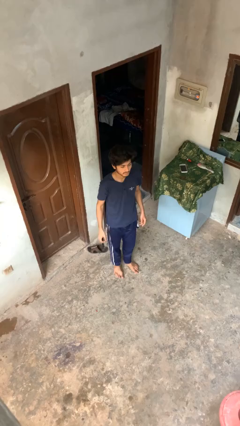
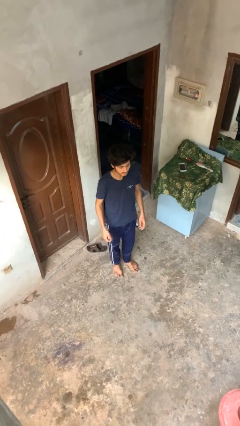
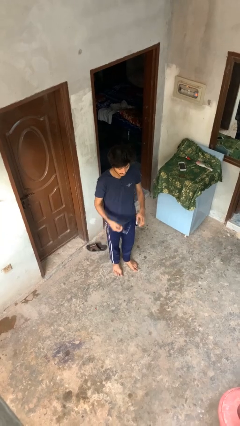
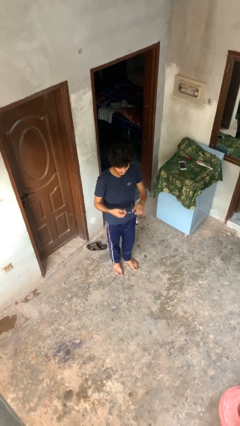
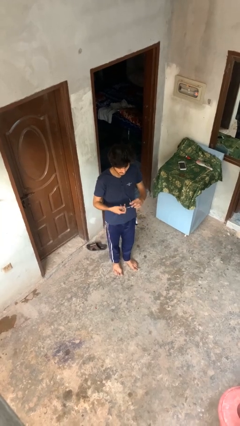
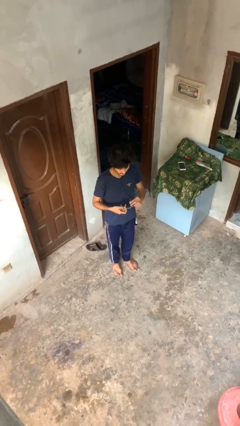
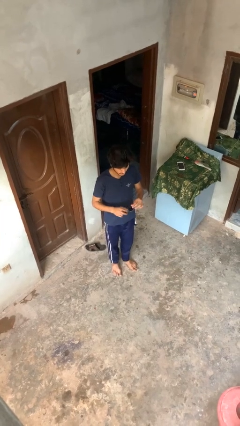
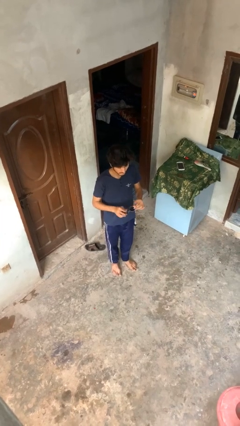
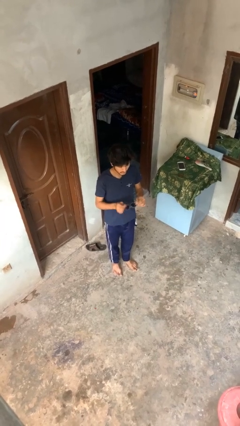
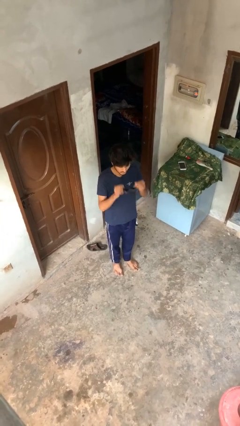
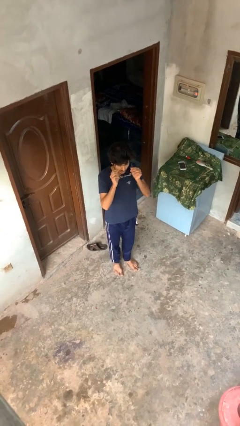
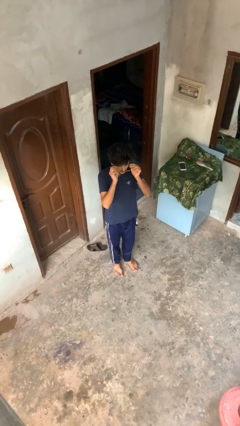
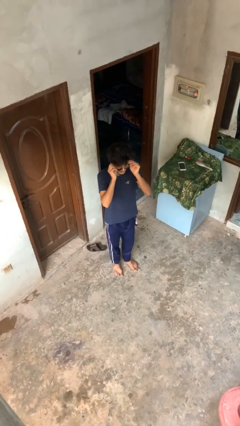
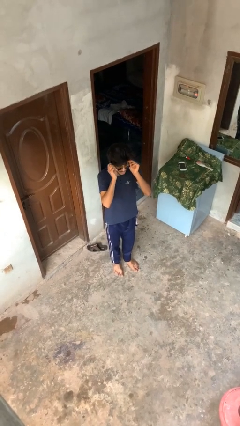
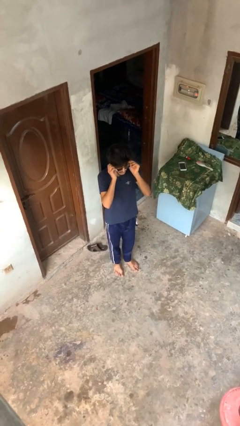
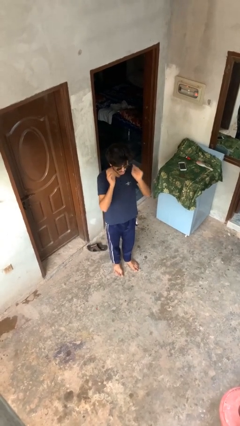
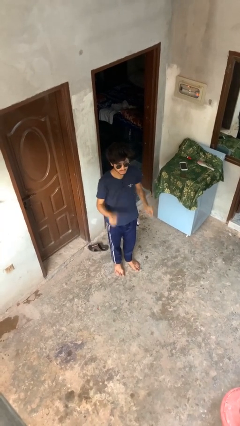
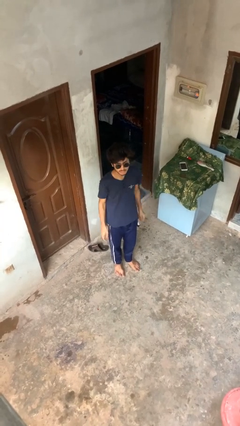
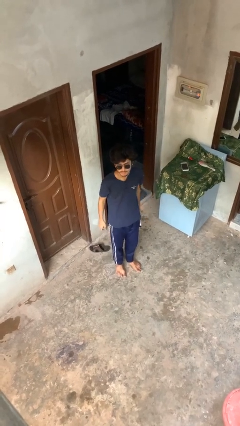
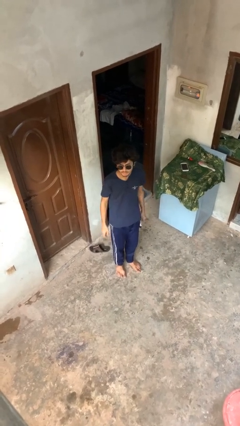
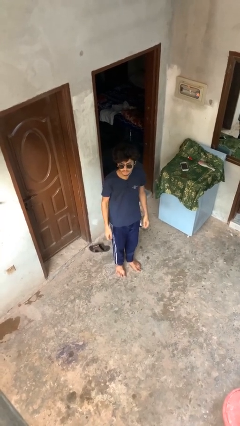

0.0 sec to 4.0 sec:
person puts on sunglasses

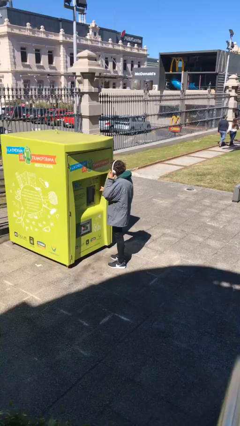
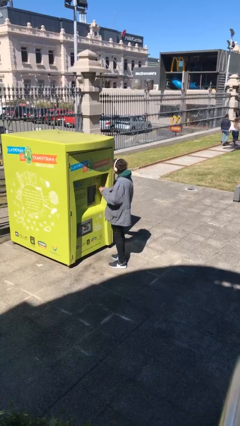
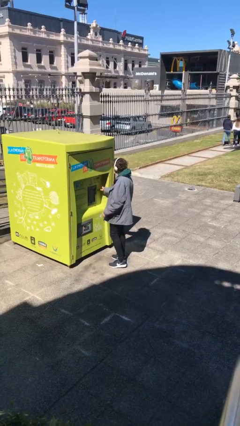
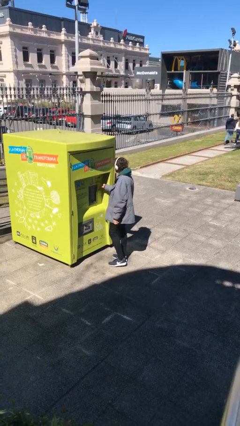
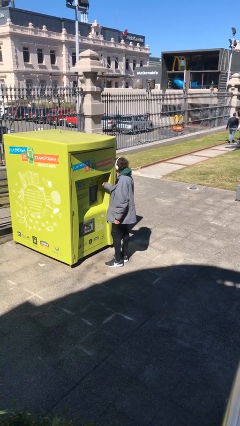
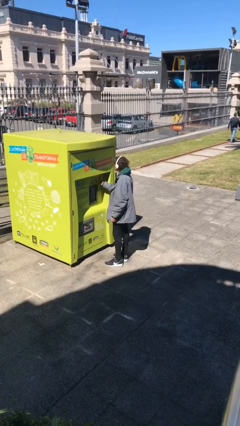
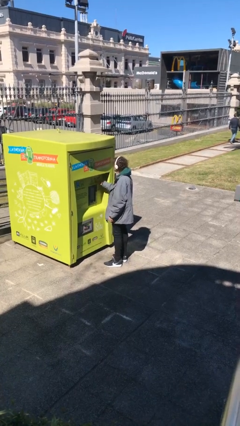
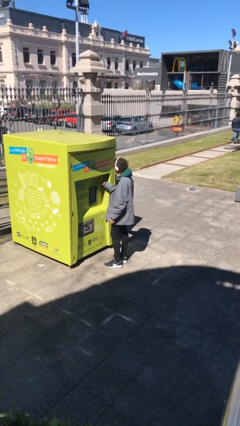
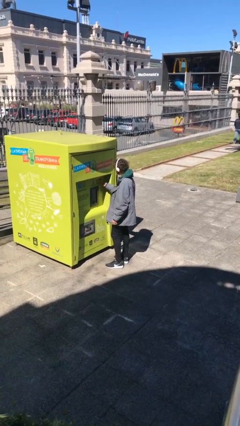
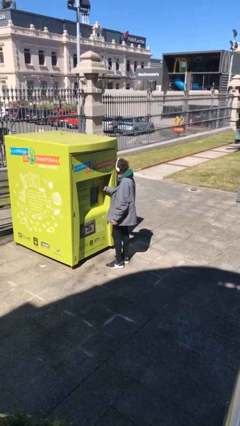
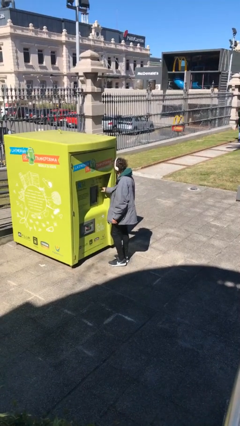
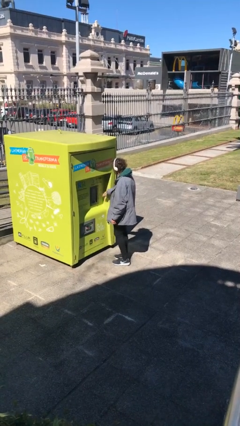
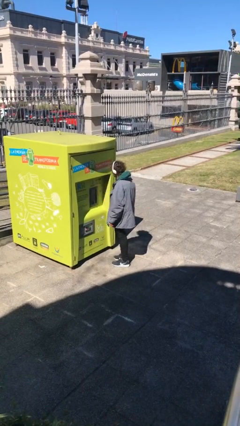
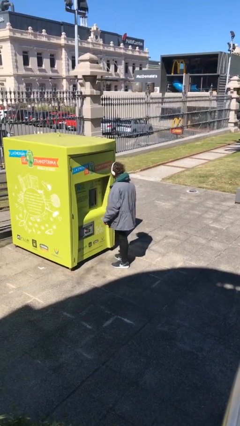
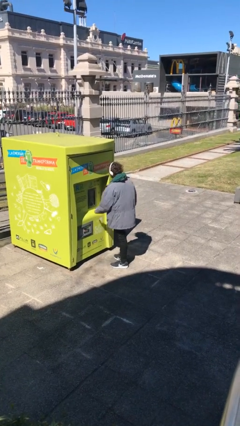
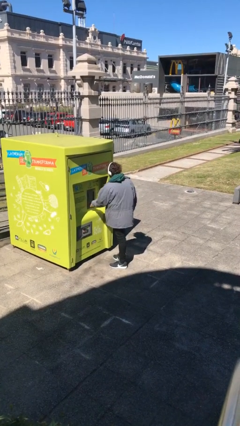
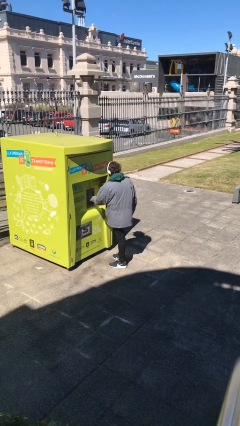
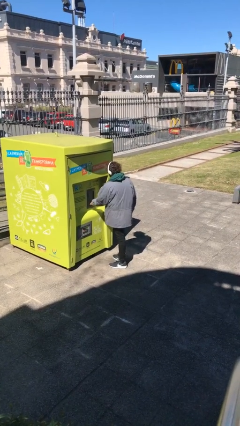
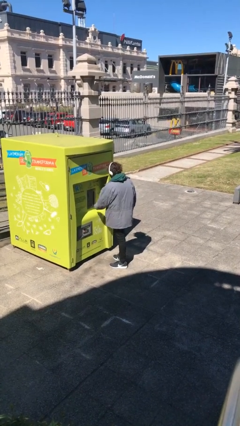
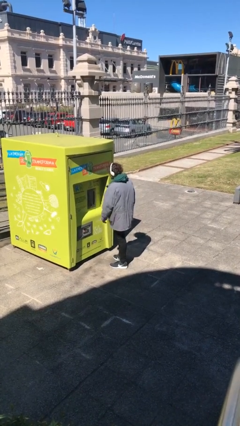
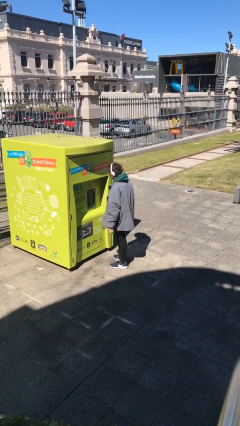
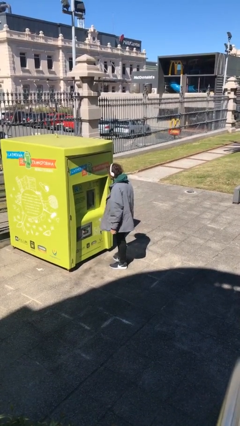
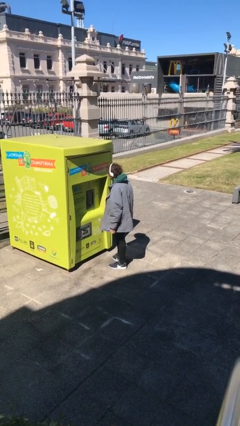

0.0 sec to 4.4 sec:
person purchases from machine

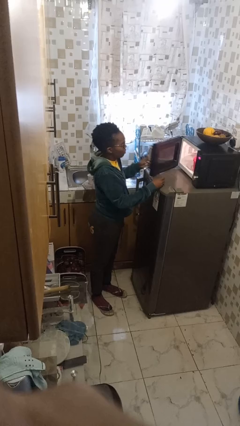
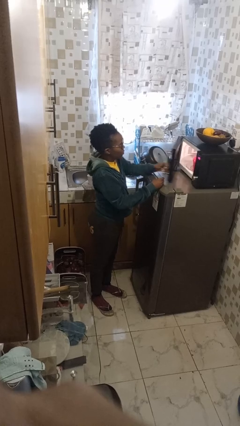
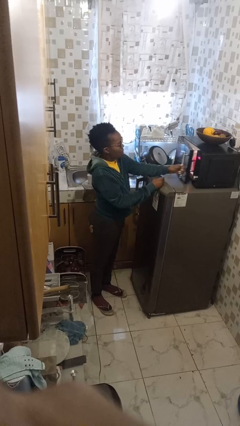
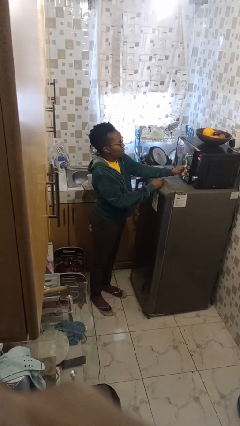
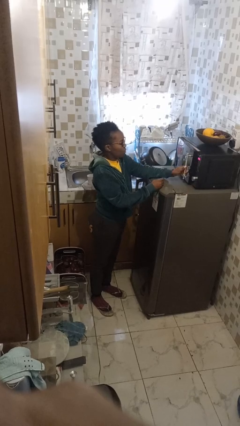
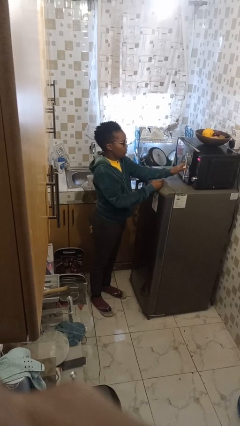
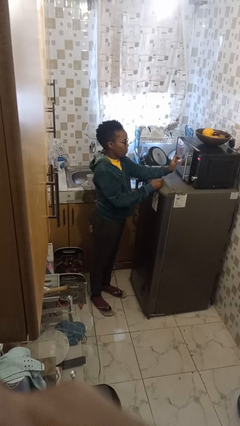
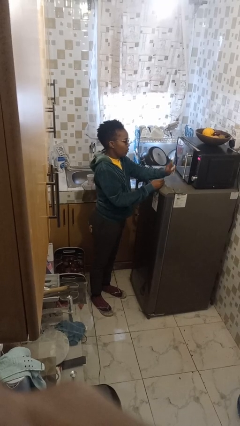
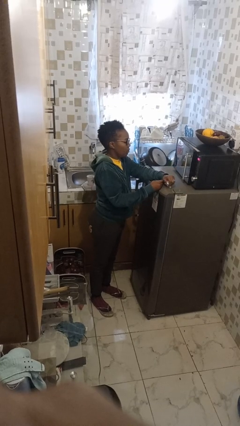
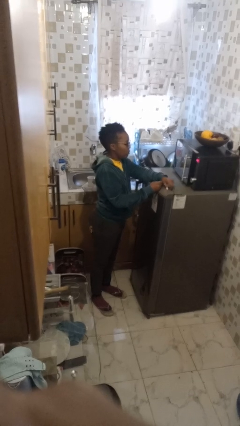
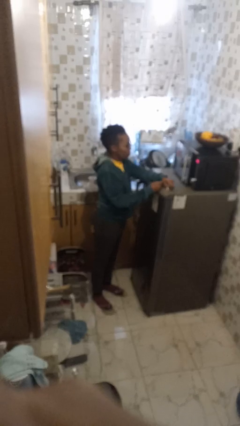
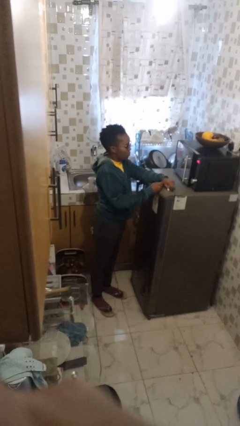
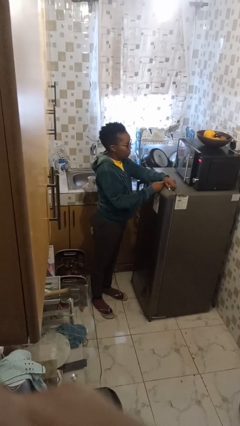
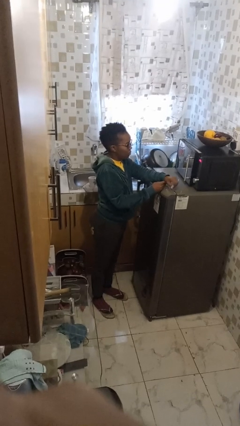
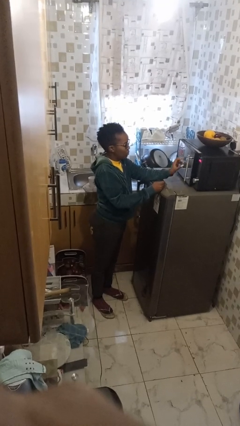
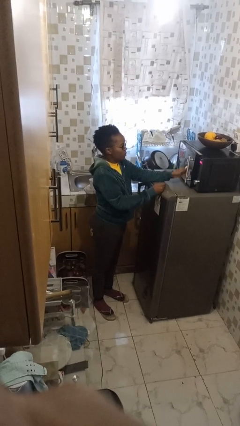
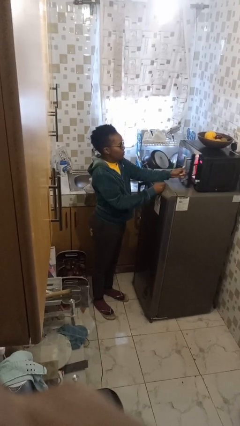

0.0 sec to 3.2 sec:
person closes microwave

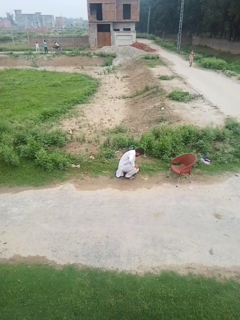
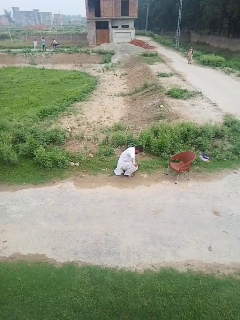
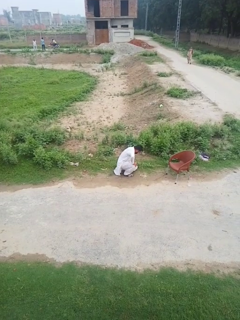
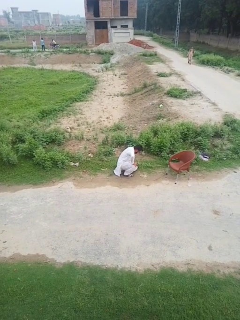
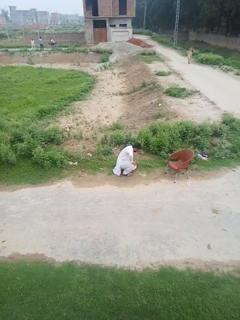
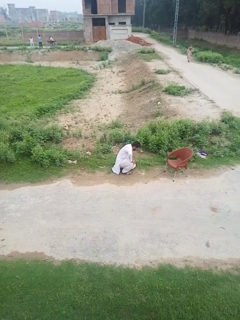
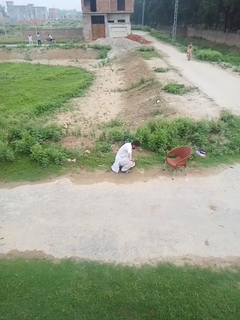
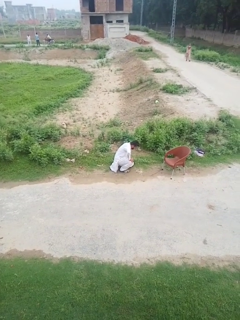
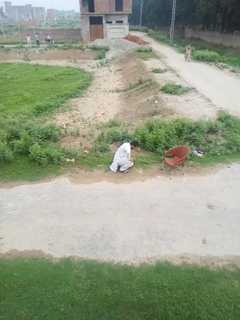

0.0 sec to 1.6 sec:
person lies down on floor

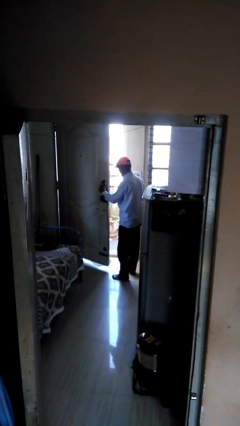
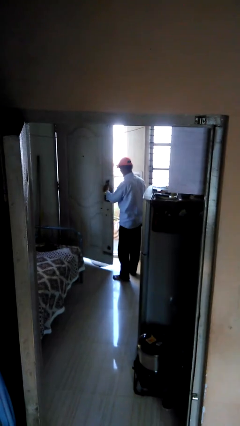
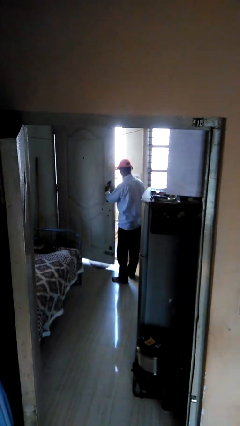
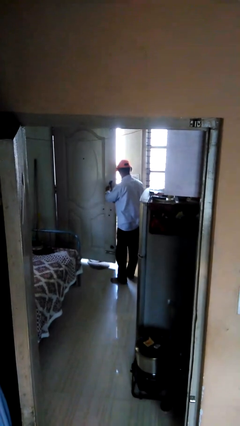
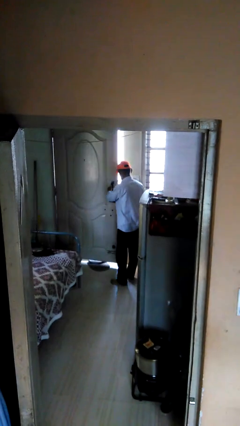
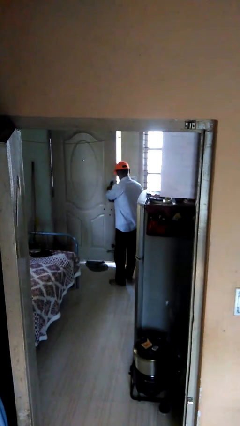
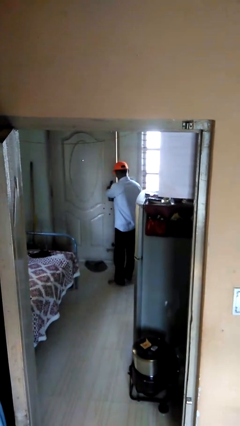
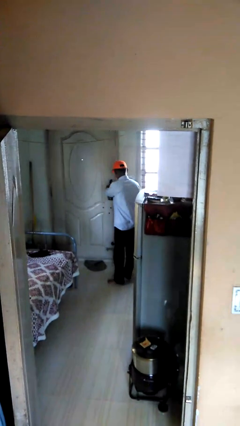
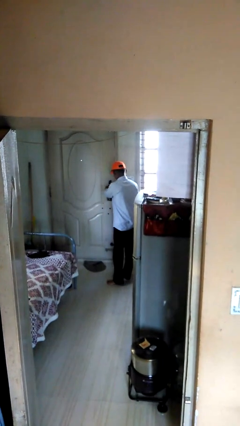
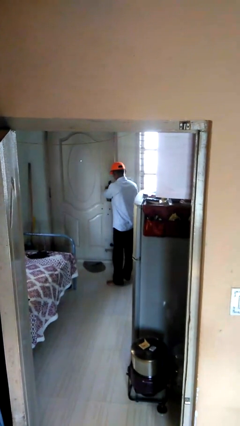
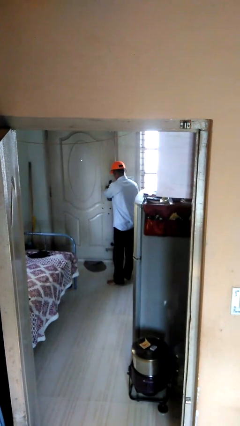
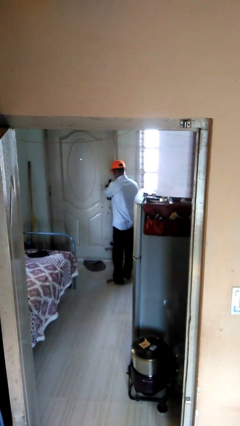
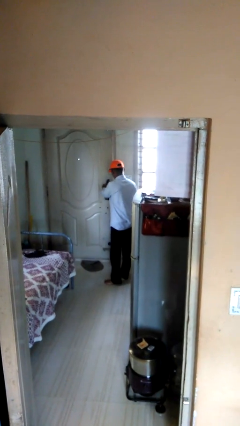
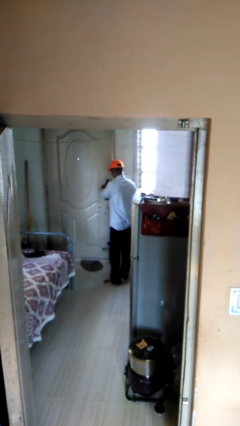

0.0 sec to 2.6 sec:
person closes facility door

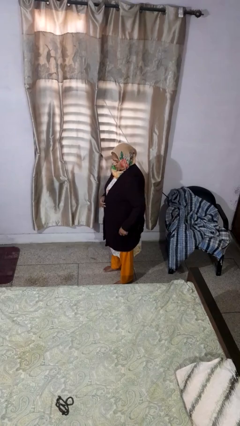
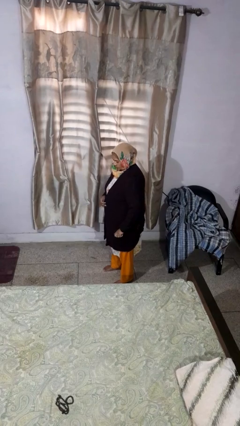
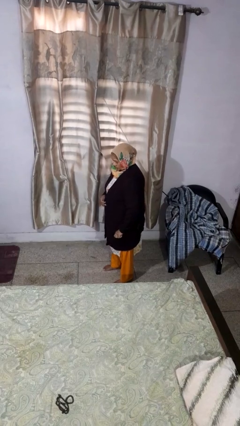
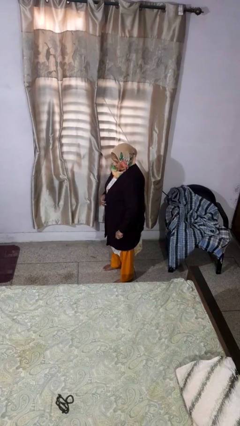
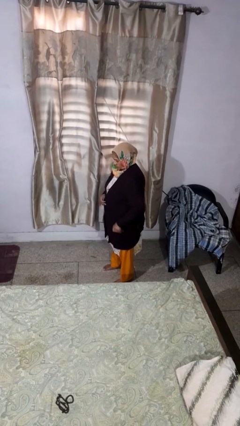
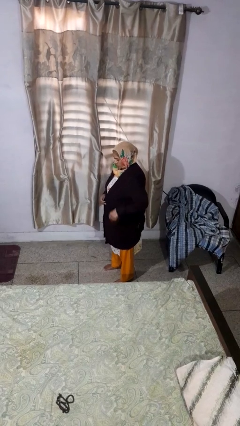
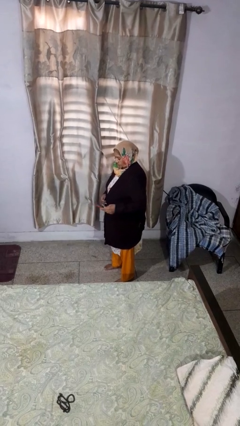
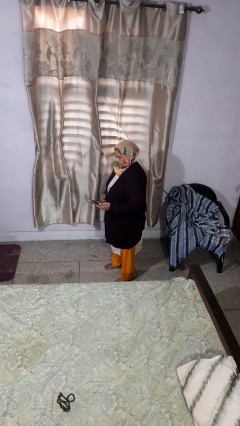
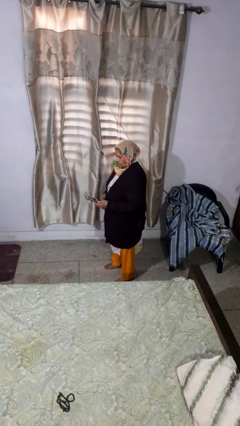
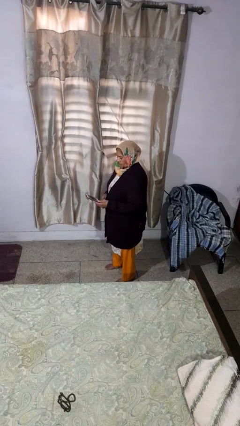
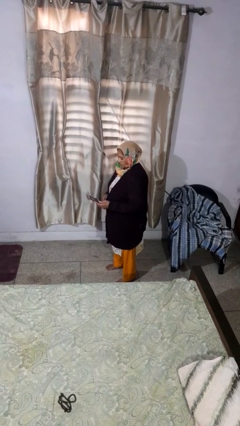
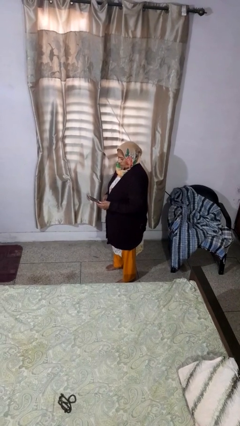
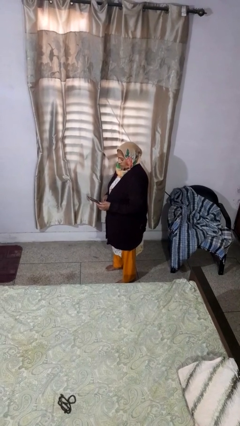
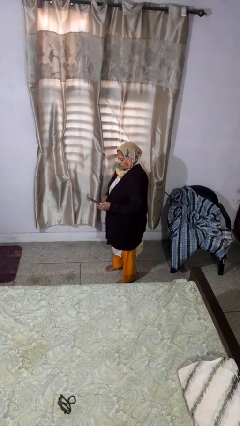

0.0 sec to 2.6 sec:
person takes phone from pocket
